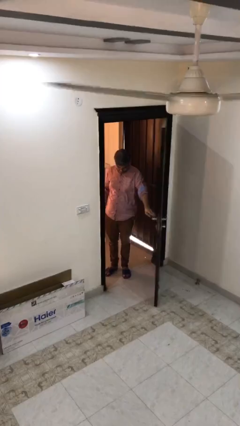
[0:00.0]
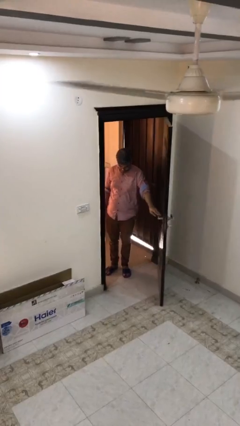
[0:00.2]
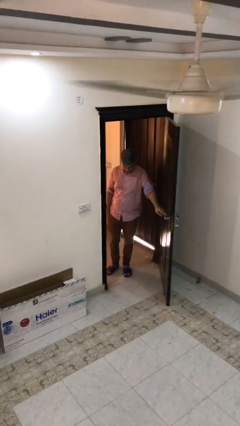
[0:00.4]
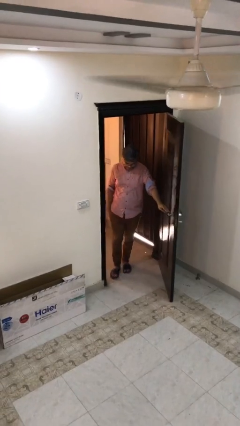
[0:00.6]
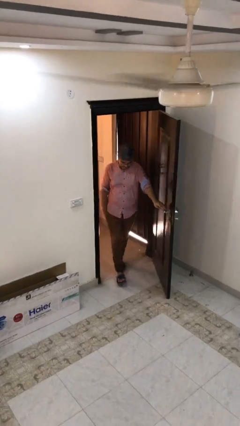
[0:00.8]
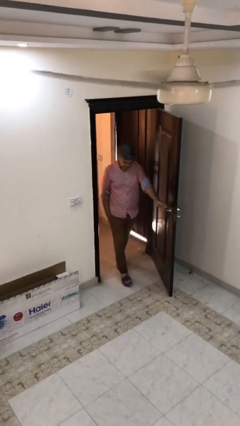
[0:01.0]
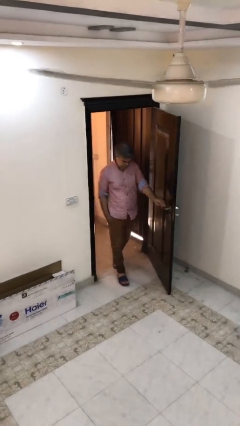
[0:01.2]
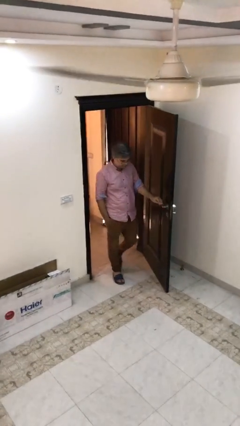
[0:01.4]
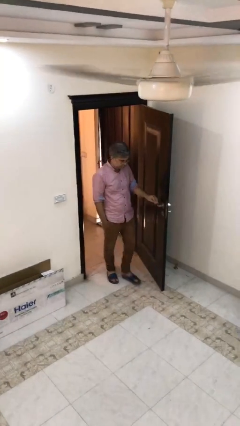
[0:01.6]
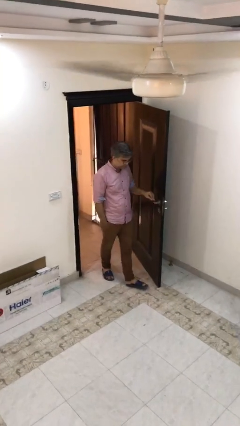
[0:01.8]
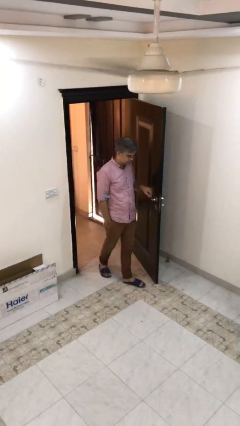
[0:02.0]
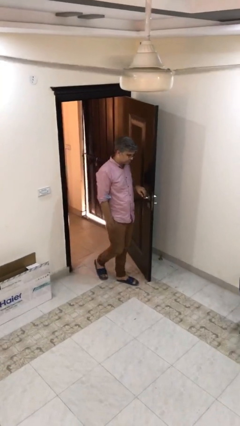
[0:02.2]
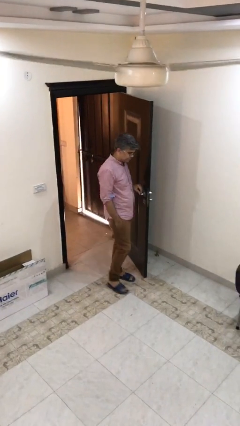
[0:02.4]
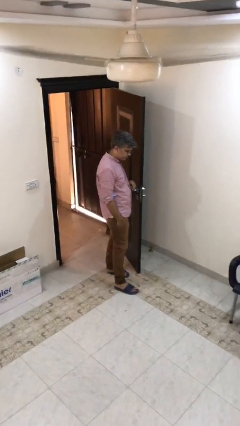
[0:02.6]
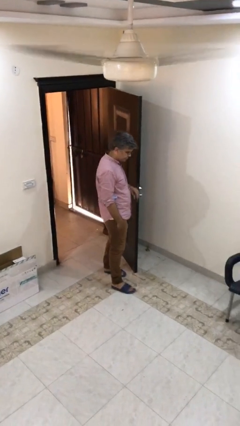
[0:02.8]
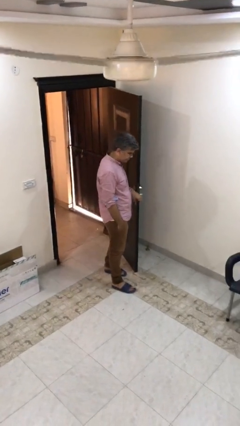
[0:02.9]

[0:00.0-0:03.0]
person enters scene through structure

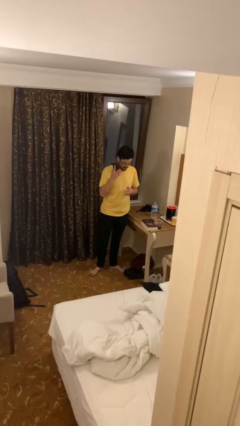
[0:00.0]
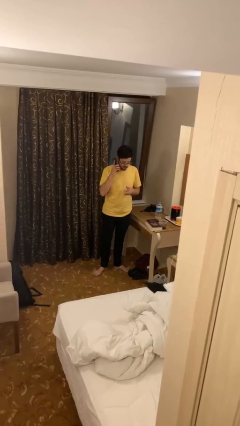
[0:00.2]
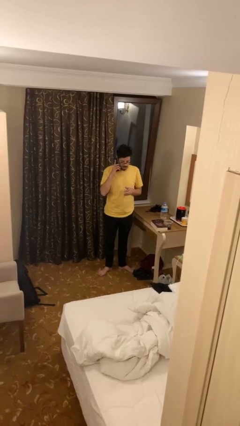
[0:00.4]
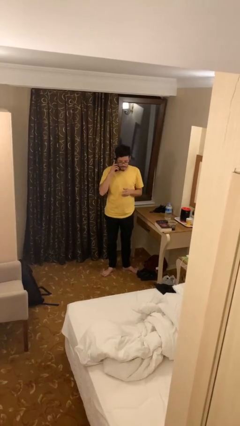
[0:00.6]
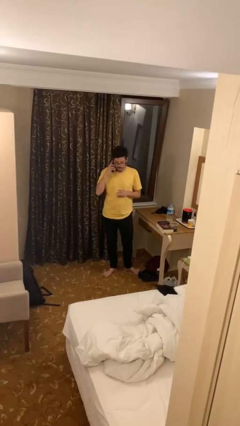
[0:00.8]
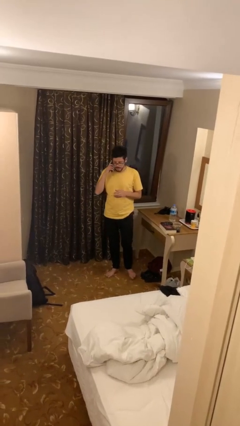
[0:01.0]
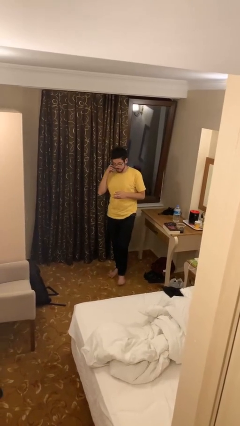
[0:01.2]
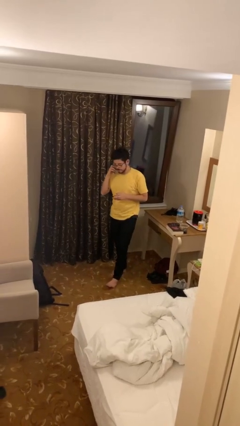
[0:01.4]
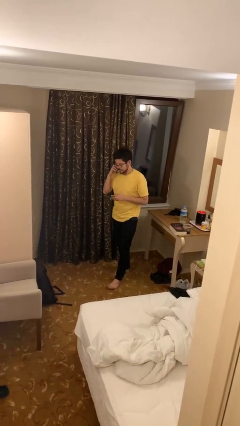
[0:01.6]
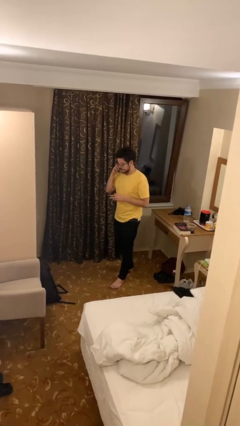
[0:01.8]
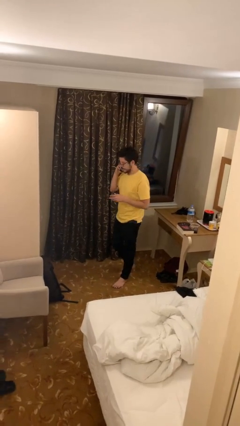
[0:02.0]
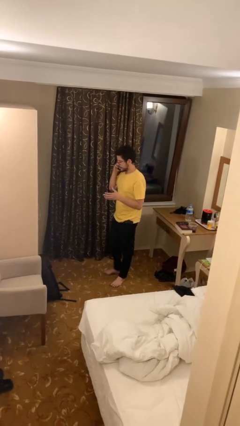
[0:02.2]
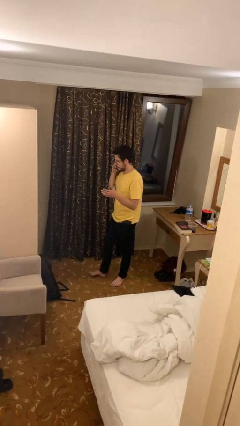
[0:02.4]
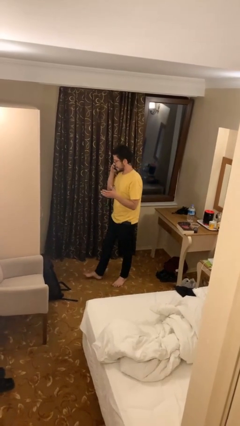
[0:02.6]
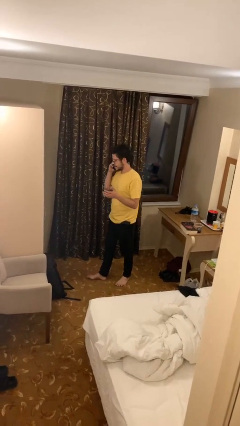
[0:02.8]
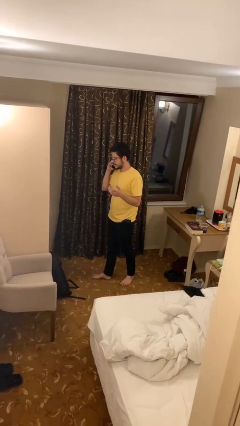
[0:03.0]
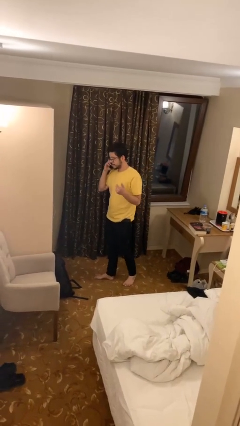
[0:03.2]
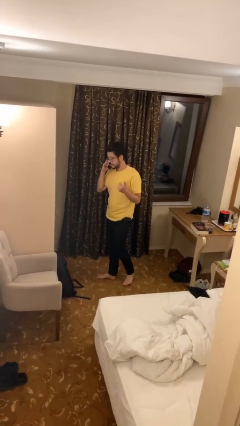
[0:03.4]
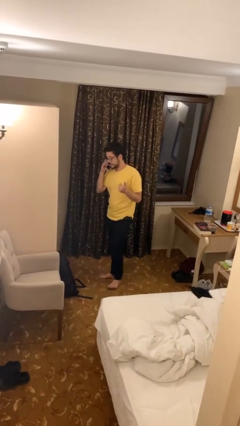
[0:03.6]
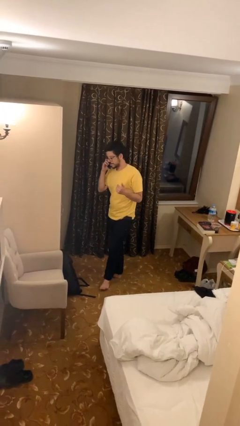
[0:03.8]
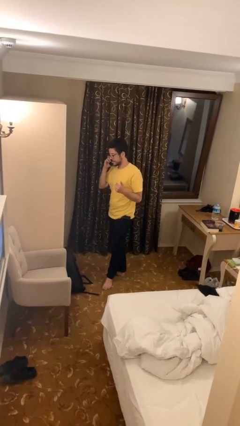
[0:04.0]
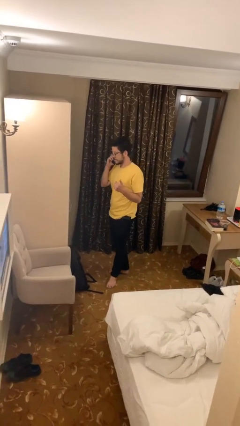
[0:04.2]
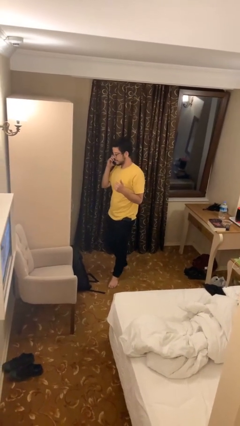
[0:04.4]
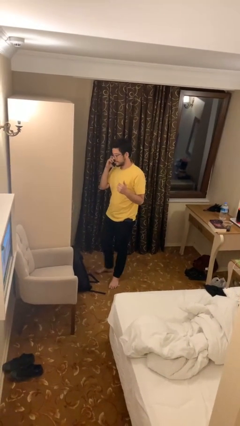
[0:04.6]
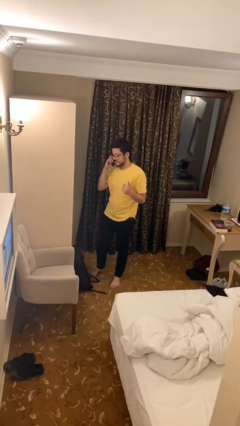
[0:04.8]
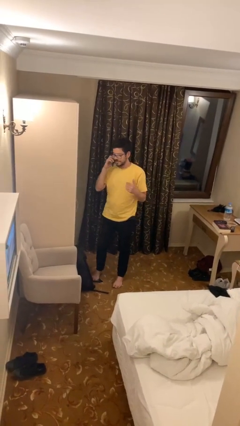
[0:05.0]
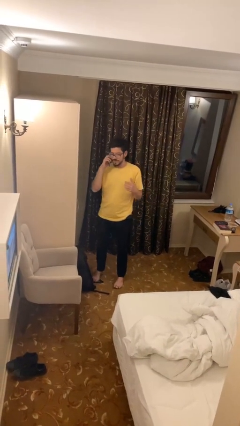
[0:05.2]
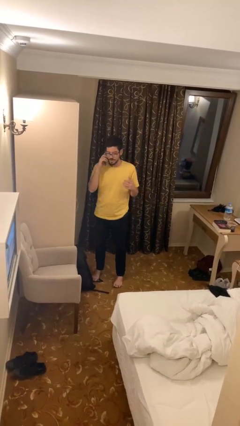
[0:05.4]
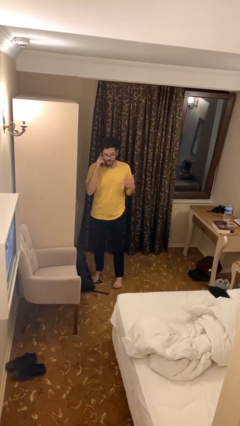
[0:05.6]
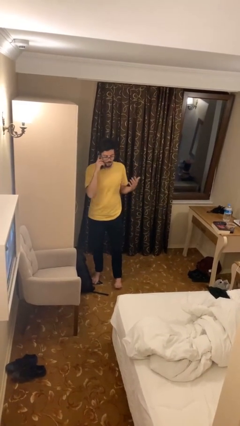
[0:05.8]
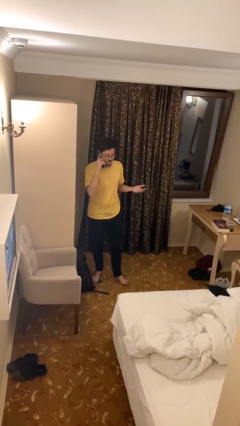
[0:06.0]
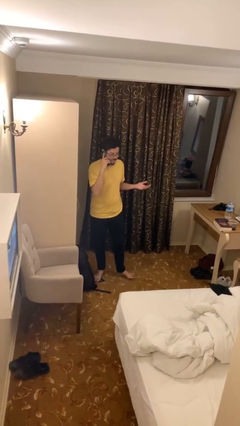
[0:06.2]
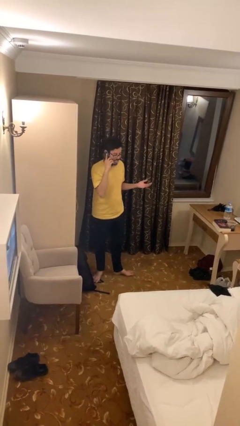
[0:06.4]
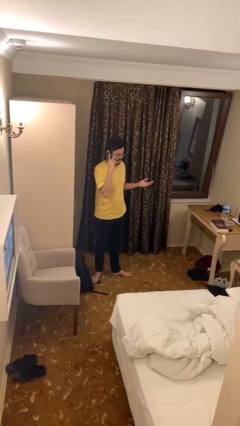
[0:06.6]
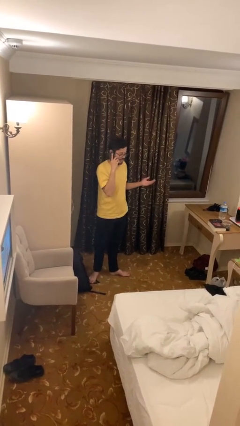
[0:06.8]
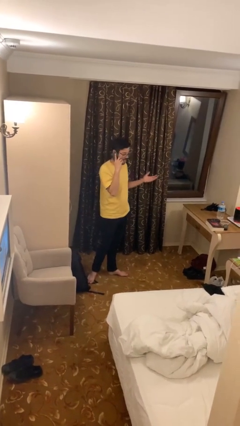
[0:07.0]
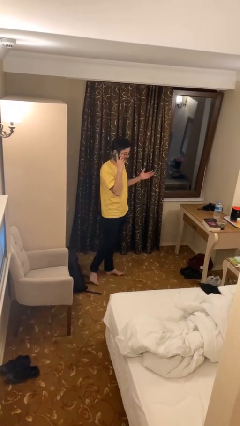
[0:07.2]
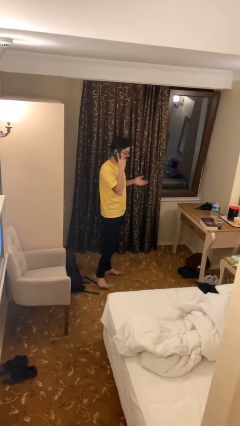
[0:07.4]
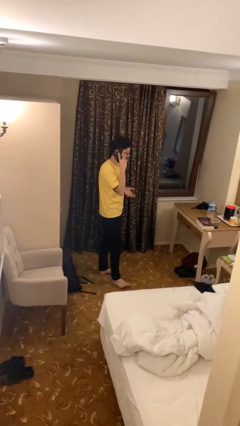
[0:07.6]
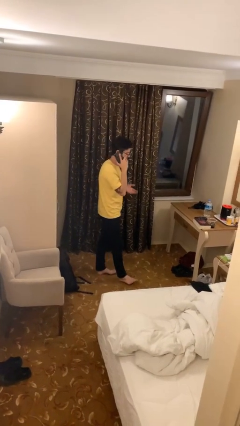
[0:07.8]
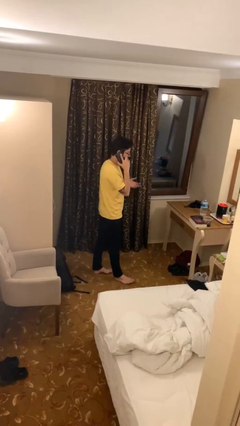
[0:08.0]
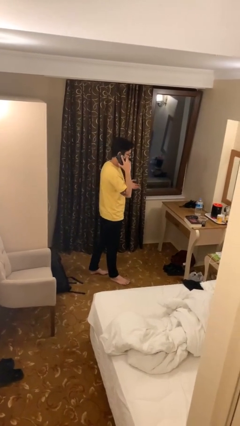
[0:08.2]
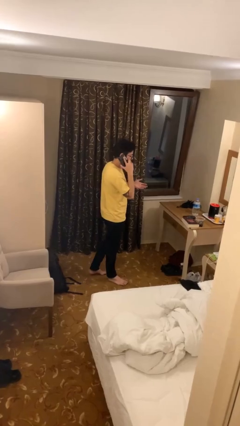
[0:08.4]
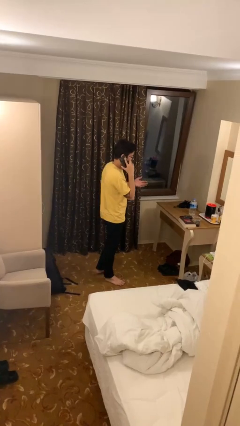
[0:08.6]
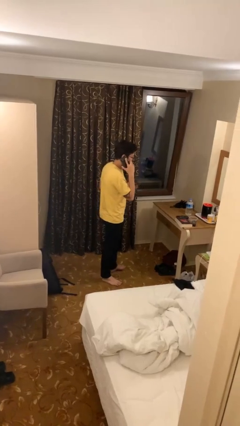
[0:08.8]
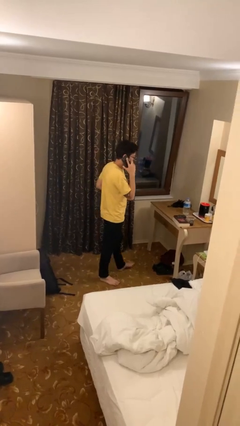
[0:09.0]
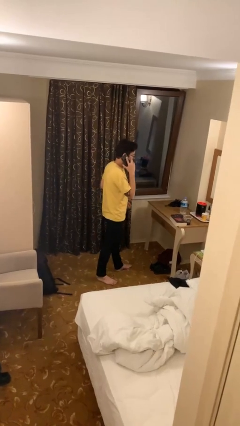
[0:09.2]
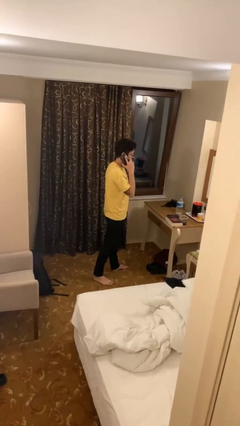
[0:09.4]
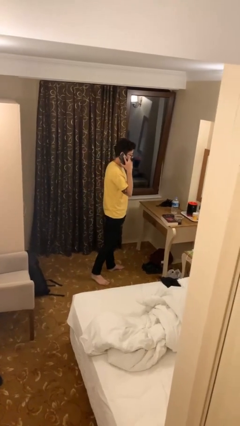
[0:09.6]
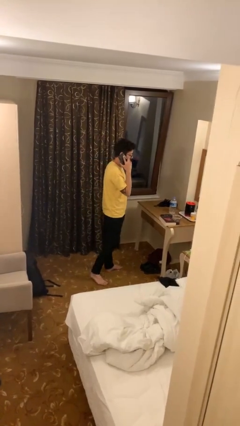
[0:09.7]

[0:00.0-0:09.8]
person talks on phone

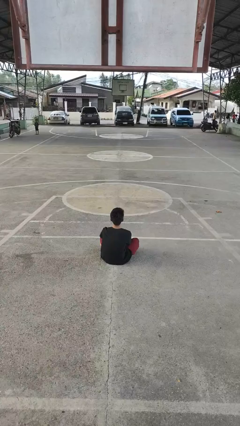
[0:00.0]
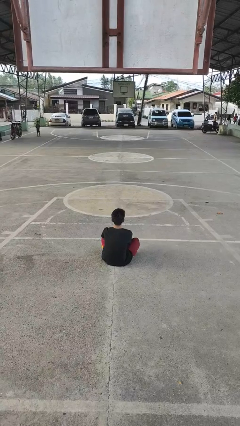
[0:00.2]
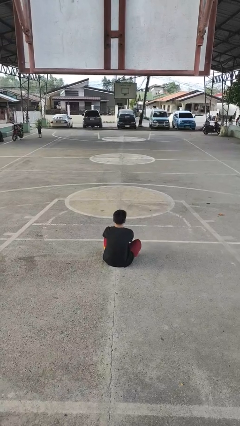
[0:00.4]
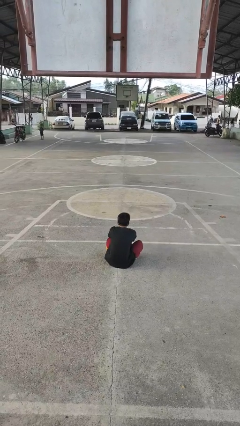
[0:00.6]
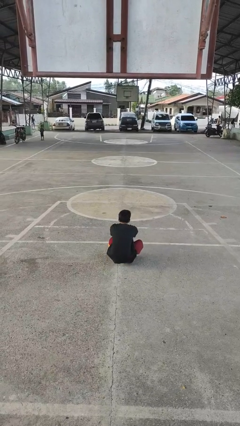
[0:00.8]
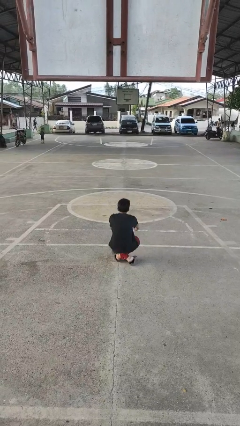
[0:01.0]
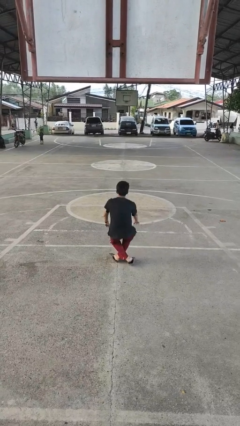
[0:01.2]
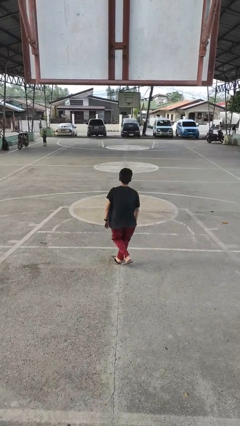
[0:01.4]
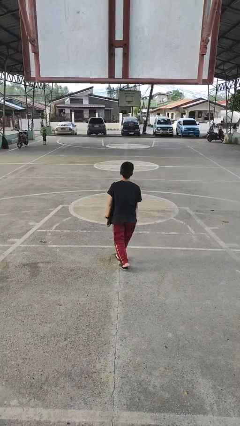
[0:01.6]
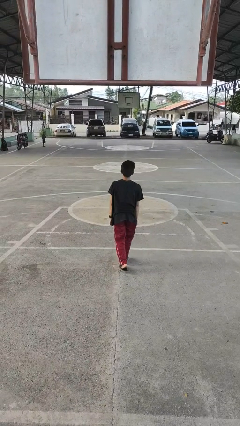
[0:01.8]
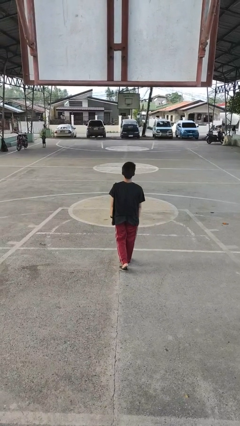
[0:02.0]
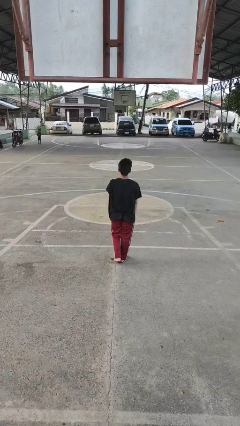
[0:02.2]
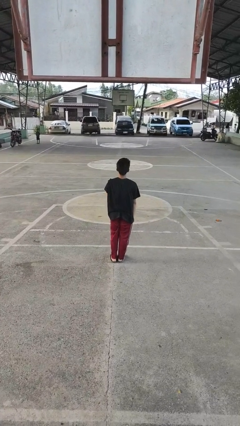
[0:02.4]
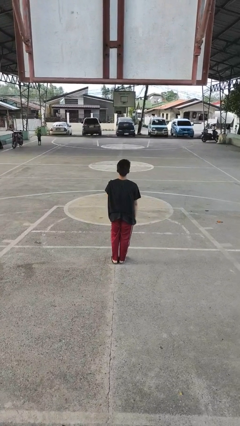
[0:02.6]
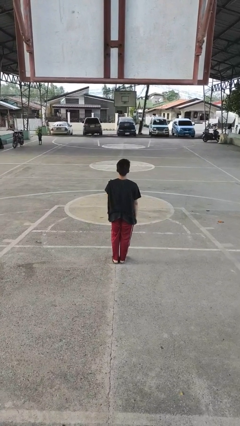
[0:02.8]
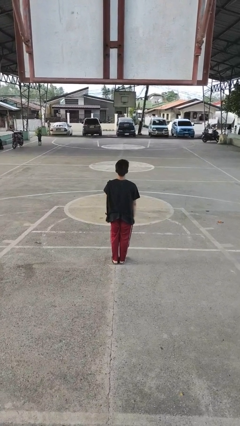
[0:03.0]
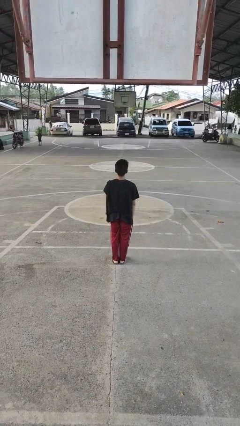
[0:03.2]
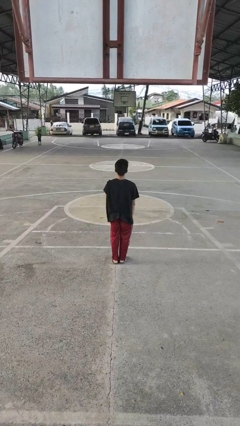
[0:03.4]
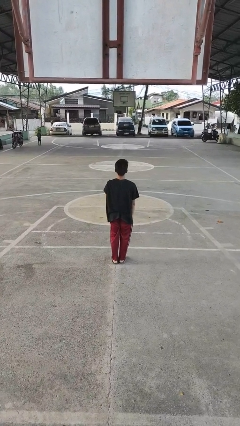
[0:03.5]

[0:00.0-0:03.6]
person stands up from floor

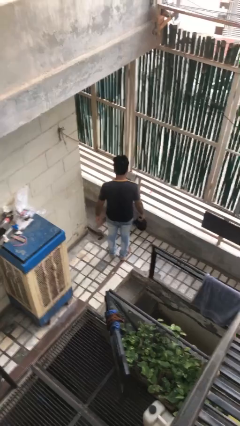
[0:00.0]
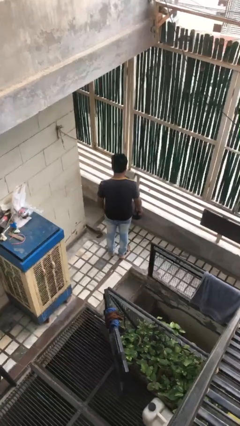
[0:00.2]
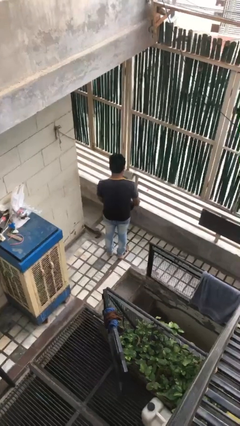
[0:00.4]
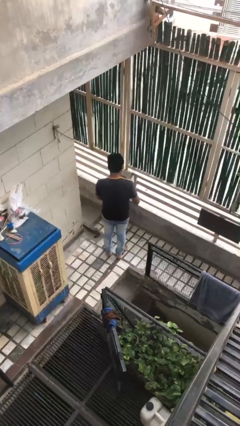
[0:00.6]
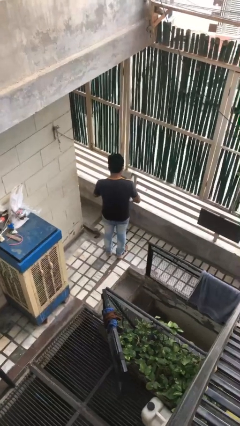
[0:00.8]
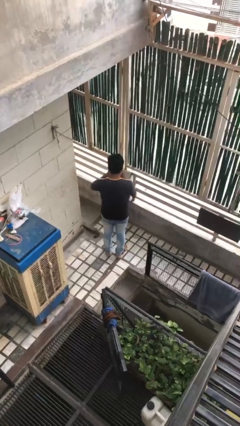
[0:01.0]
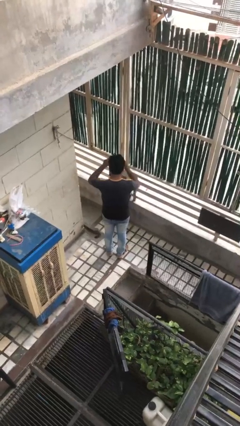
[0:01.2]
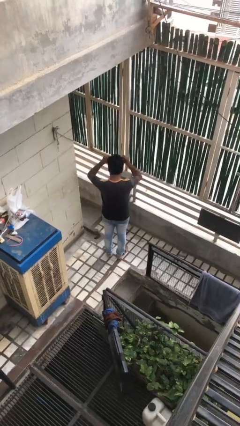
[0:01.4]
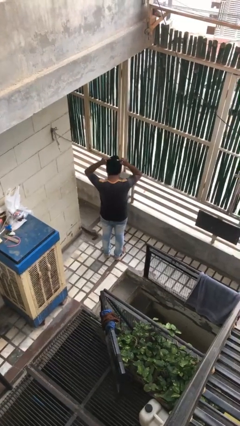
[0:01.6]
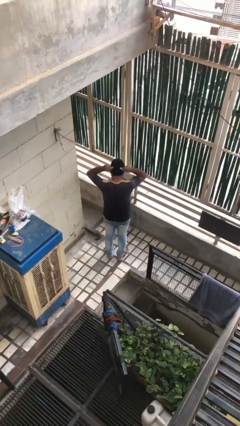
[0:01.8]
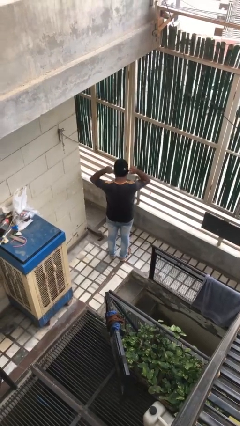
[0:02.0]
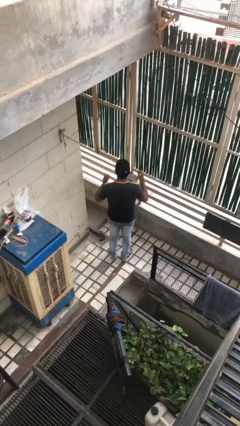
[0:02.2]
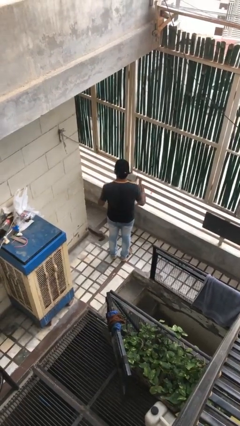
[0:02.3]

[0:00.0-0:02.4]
person puts on hat
